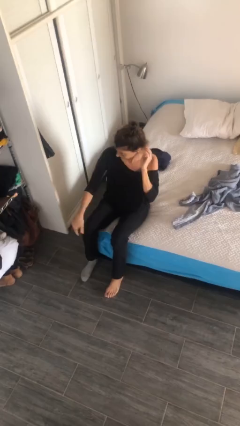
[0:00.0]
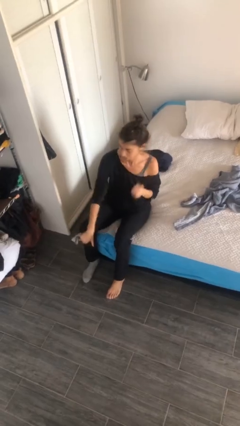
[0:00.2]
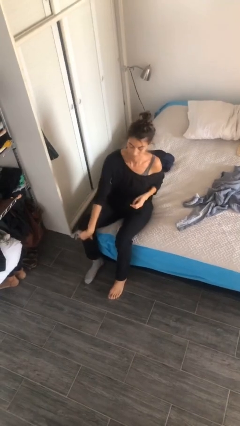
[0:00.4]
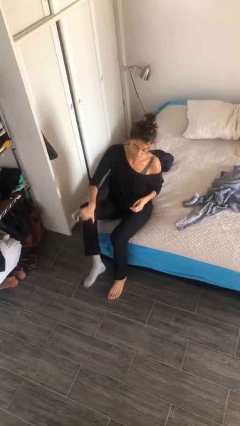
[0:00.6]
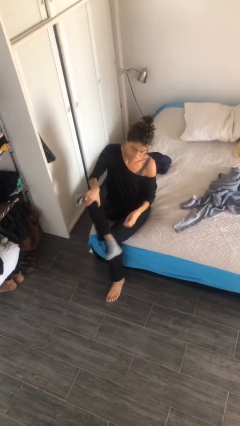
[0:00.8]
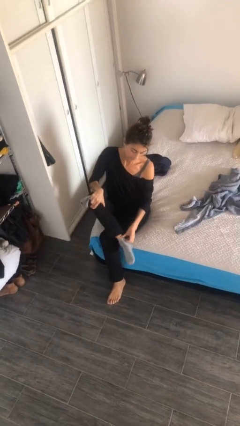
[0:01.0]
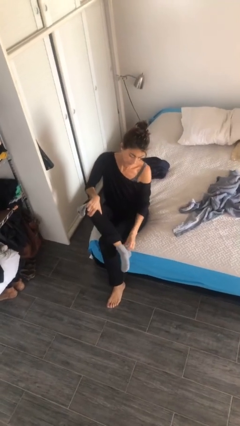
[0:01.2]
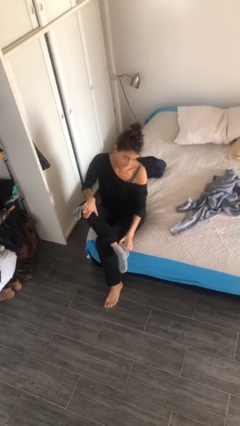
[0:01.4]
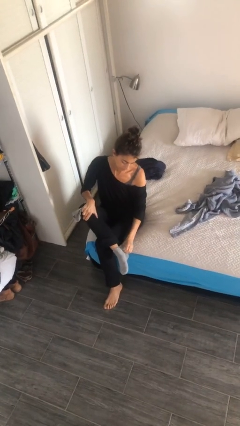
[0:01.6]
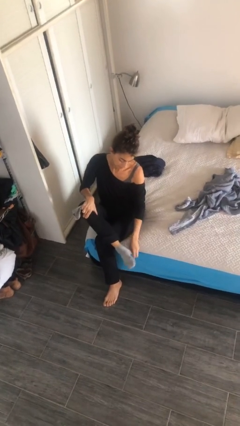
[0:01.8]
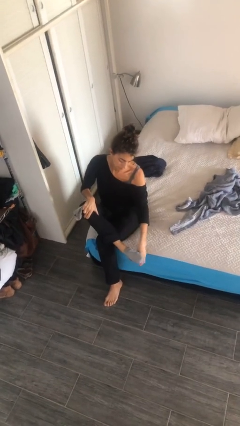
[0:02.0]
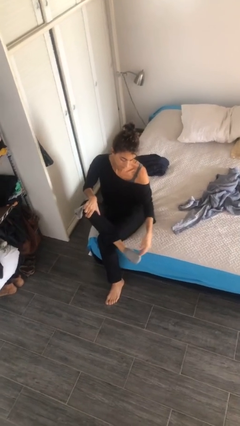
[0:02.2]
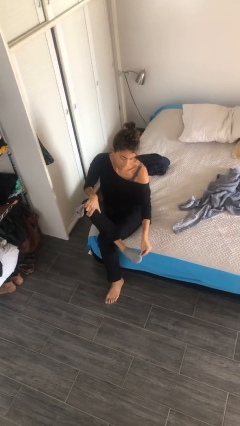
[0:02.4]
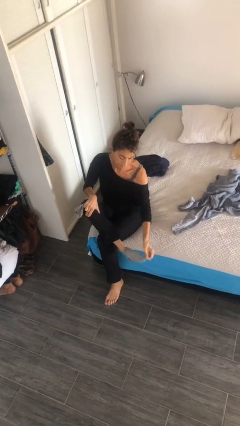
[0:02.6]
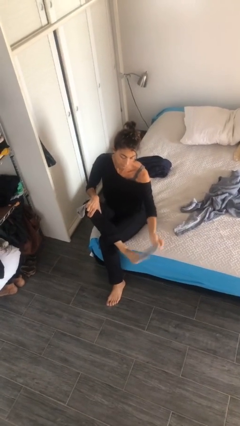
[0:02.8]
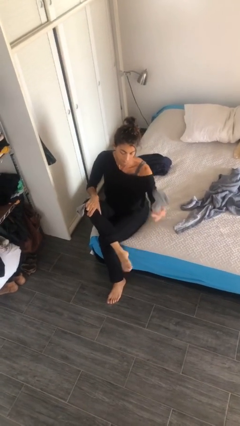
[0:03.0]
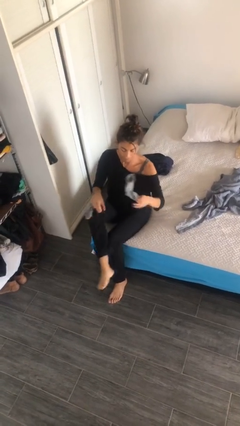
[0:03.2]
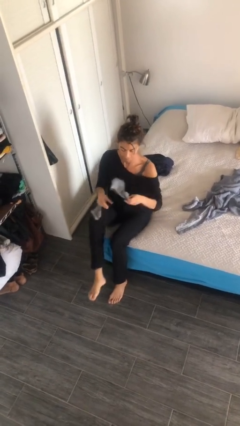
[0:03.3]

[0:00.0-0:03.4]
person takes off socks

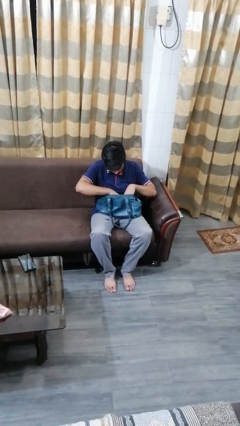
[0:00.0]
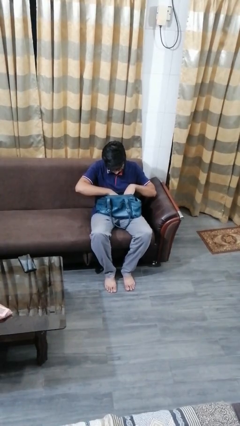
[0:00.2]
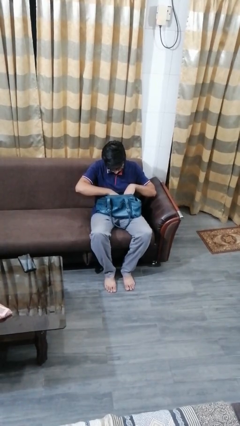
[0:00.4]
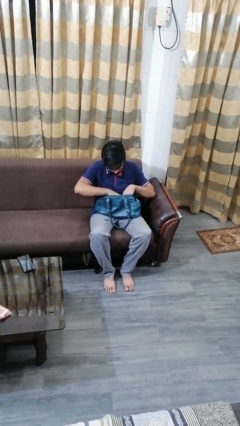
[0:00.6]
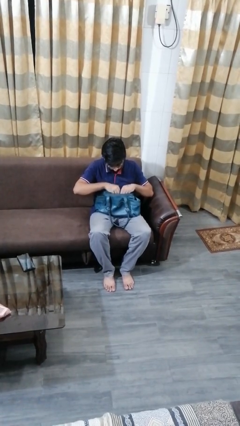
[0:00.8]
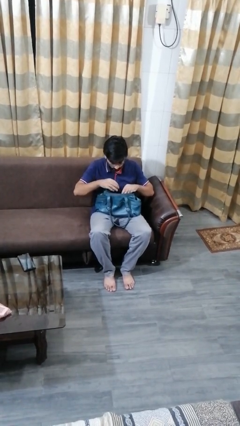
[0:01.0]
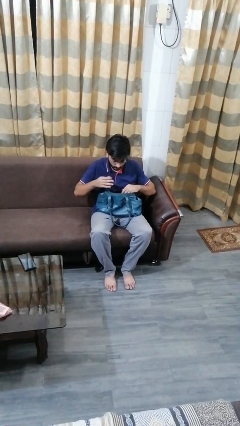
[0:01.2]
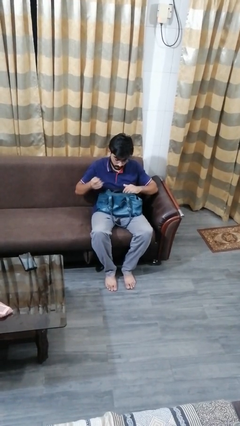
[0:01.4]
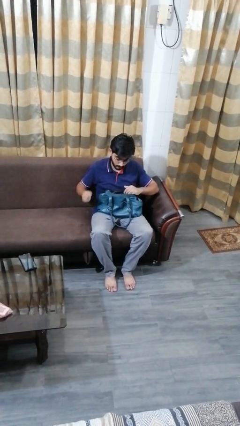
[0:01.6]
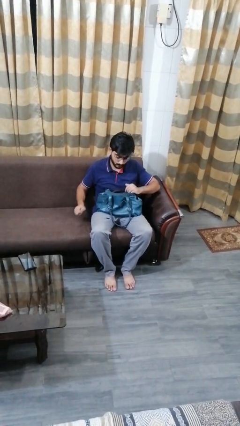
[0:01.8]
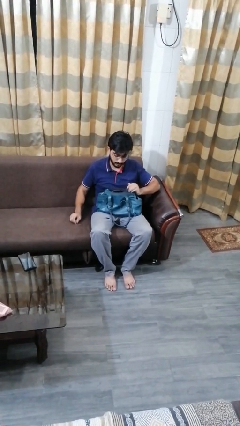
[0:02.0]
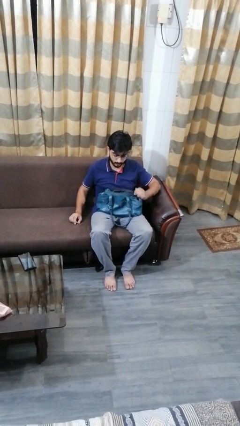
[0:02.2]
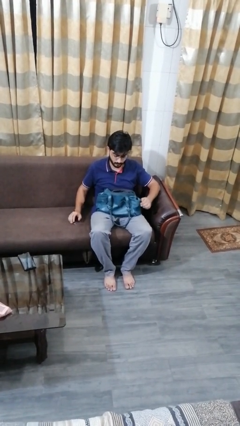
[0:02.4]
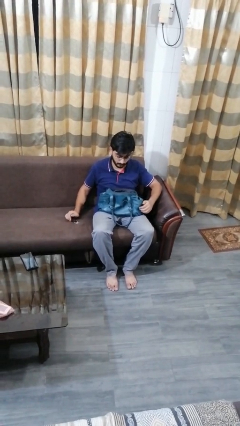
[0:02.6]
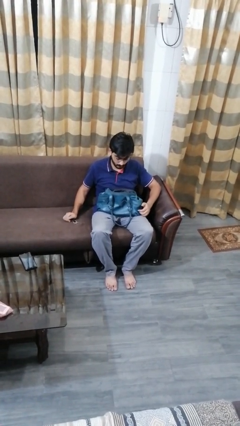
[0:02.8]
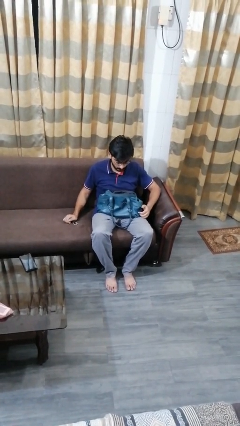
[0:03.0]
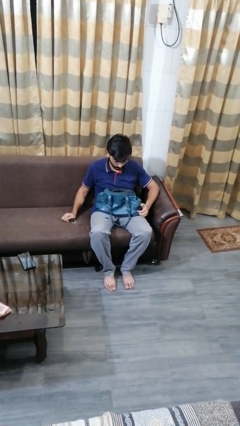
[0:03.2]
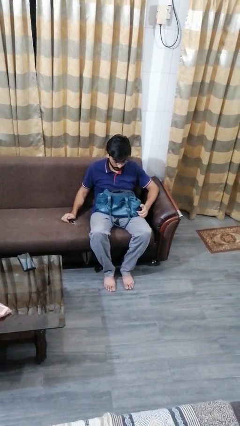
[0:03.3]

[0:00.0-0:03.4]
person takes object from purse

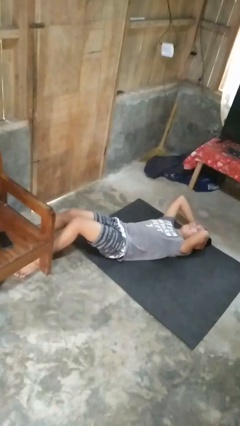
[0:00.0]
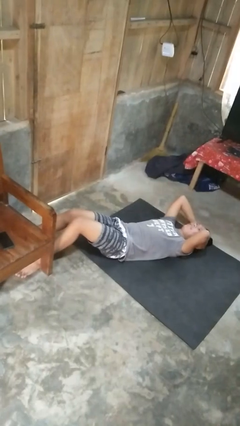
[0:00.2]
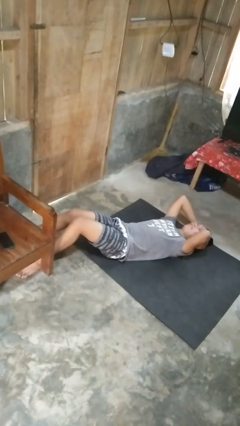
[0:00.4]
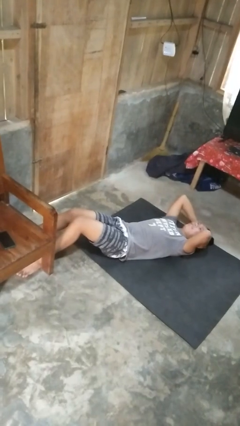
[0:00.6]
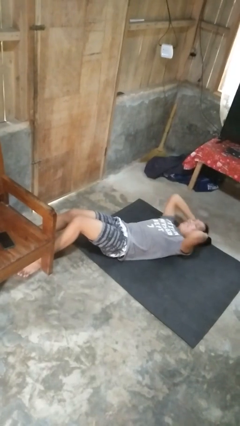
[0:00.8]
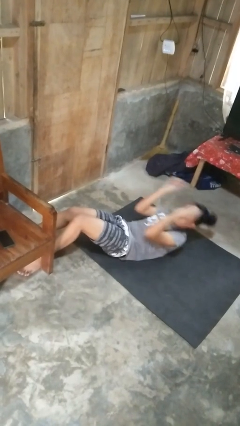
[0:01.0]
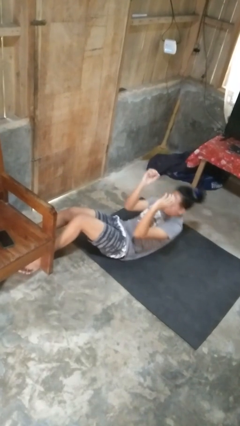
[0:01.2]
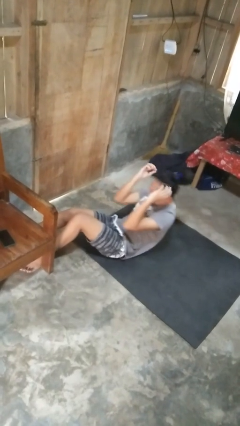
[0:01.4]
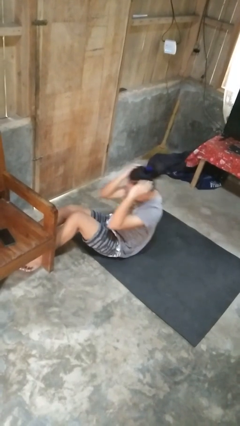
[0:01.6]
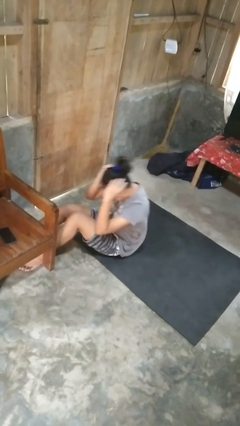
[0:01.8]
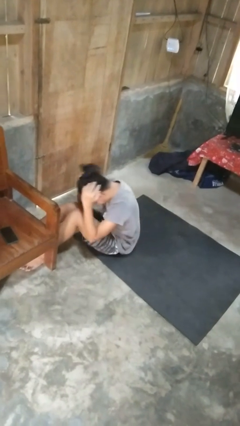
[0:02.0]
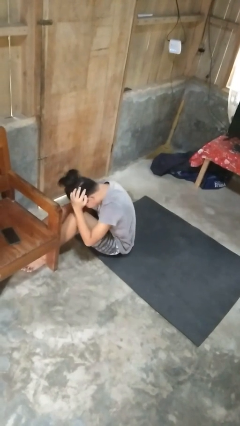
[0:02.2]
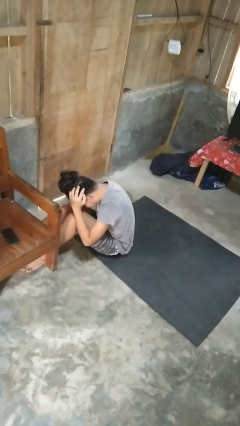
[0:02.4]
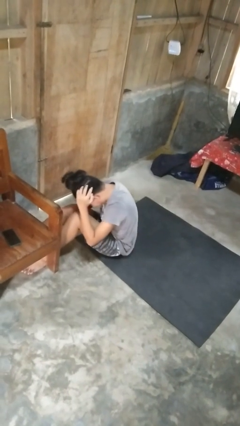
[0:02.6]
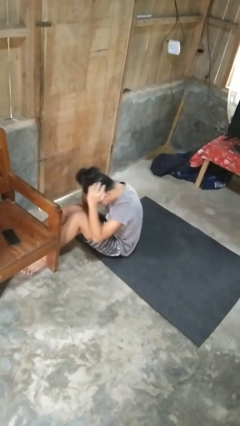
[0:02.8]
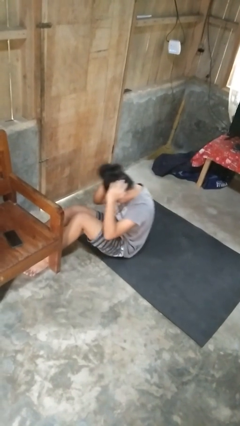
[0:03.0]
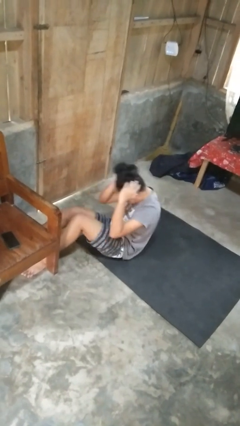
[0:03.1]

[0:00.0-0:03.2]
person exercises with situp

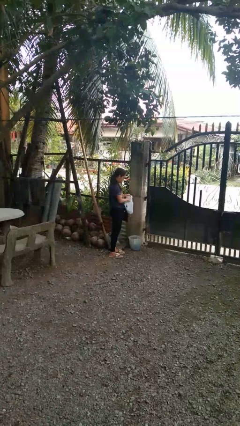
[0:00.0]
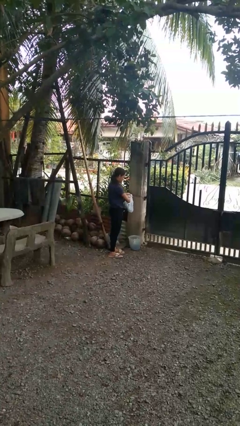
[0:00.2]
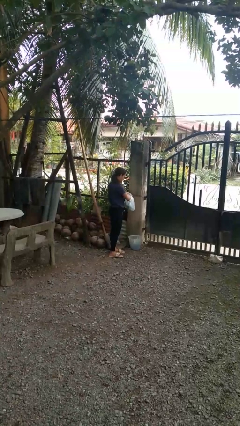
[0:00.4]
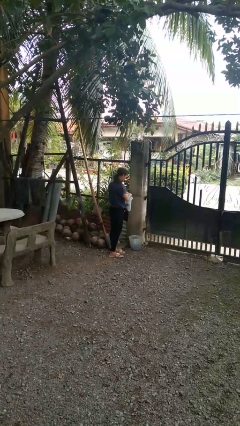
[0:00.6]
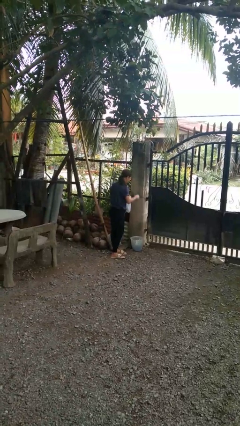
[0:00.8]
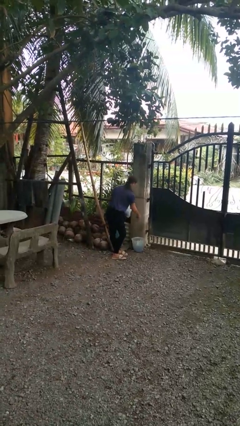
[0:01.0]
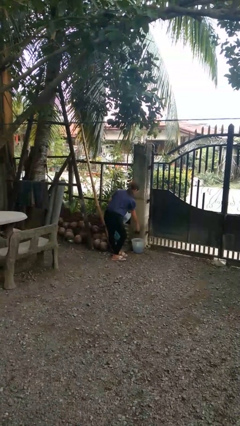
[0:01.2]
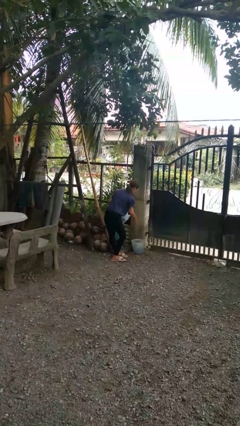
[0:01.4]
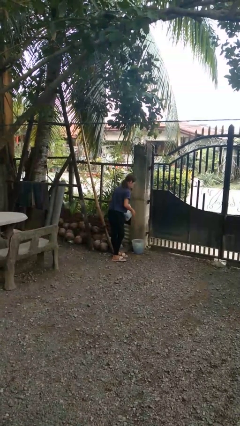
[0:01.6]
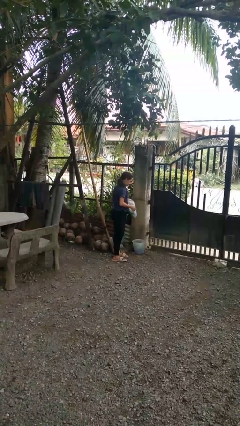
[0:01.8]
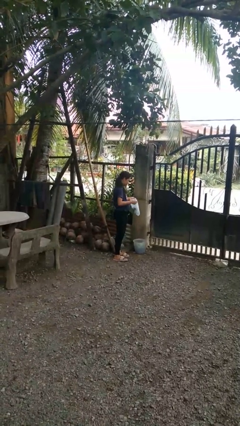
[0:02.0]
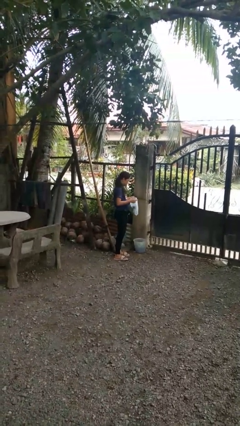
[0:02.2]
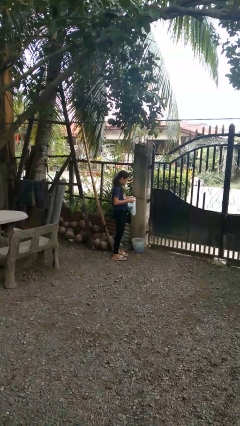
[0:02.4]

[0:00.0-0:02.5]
person discards trash

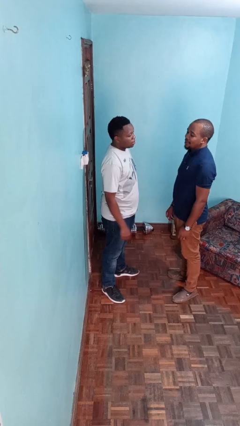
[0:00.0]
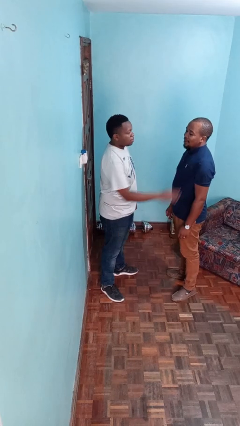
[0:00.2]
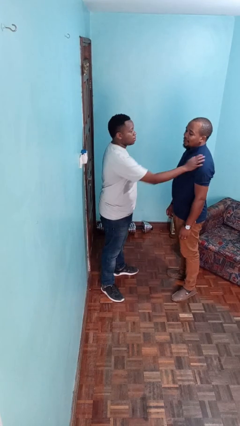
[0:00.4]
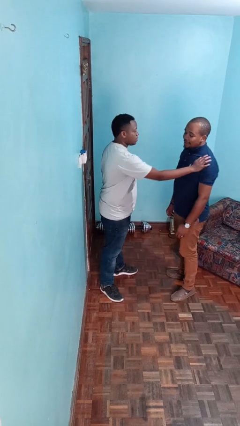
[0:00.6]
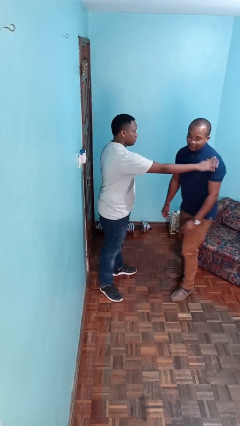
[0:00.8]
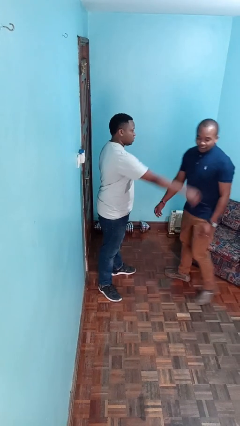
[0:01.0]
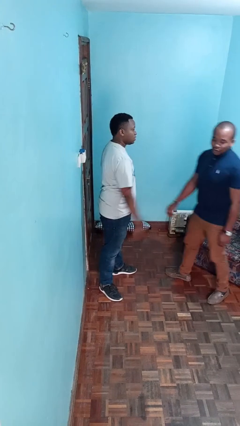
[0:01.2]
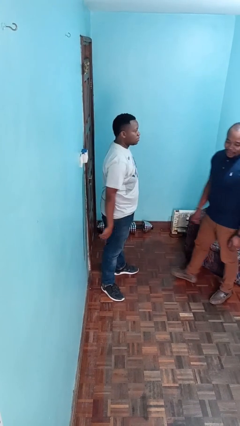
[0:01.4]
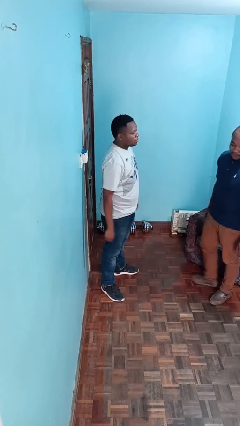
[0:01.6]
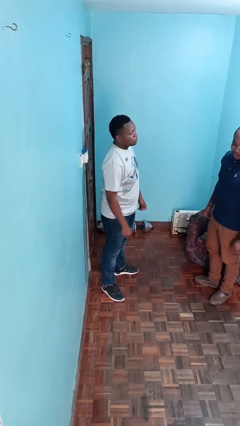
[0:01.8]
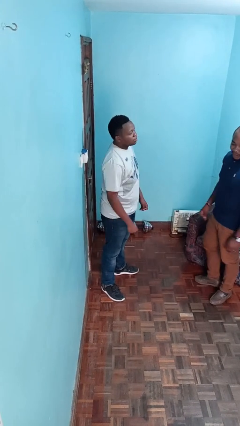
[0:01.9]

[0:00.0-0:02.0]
person shoves person

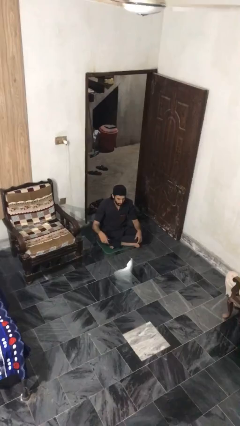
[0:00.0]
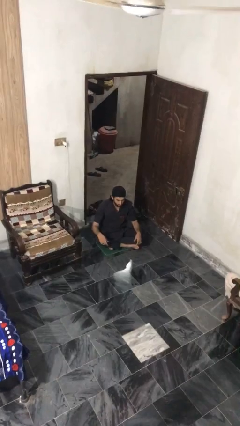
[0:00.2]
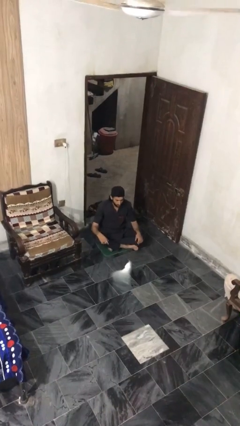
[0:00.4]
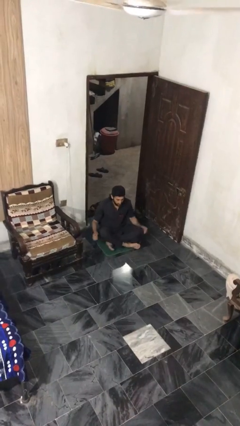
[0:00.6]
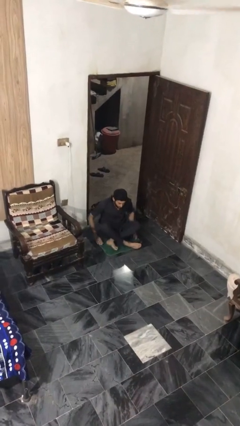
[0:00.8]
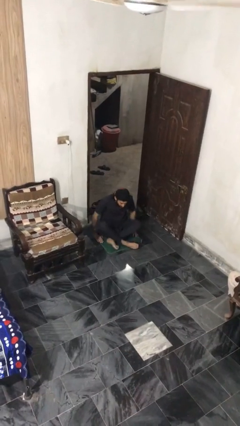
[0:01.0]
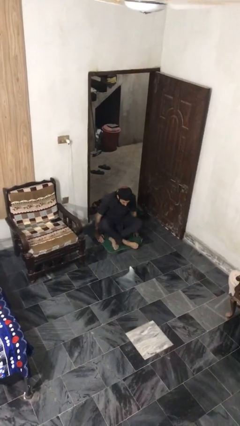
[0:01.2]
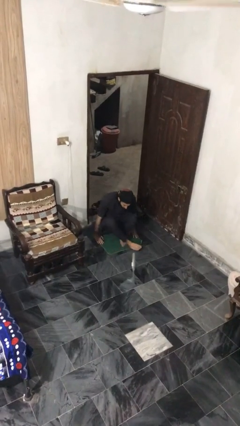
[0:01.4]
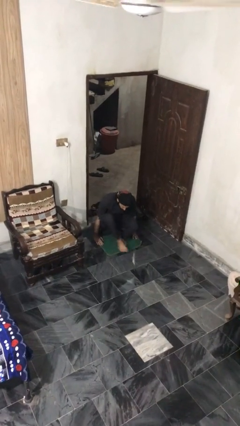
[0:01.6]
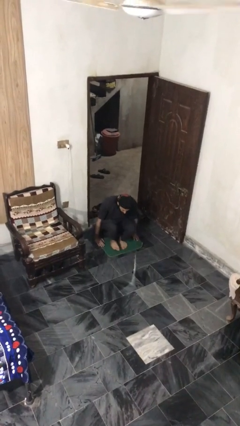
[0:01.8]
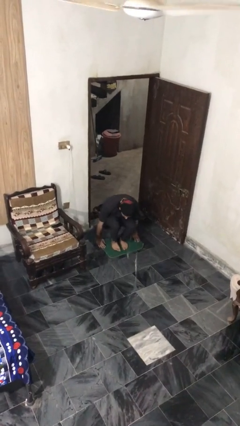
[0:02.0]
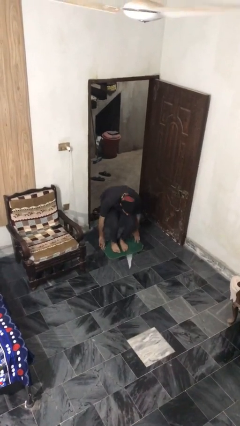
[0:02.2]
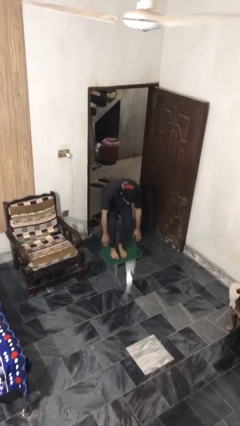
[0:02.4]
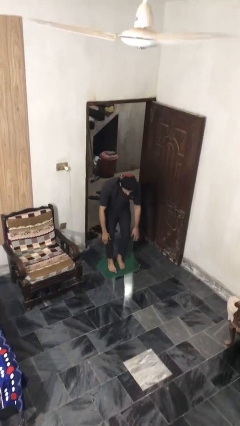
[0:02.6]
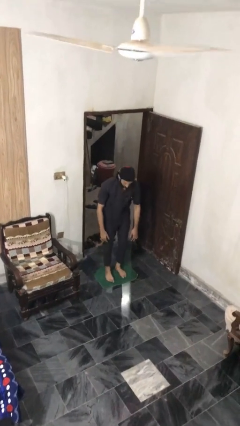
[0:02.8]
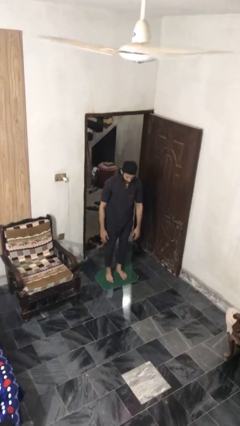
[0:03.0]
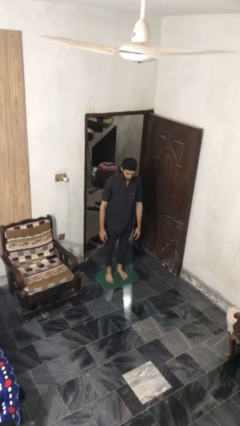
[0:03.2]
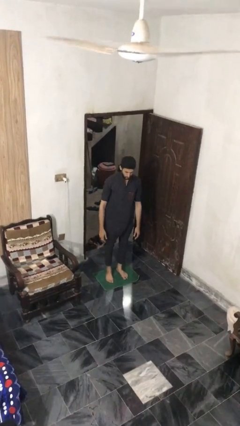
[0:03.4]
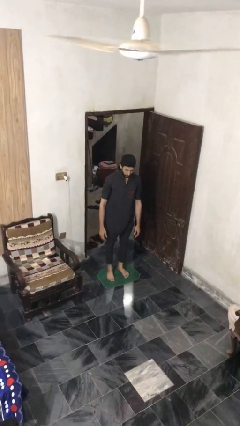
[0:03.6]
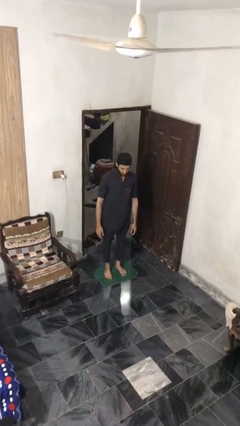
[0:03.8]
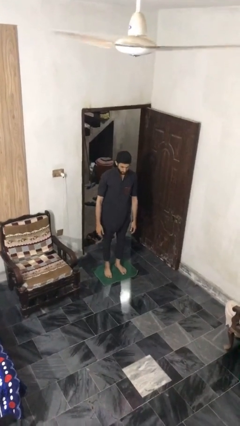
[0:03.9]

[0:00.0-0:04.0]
person stands up from floor
